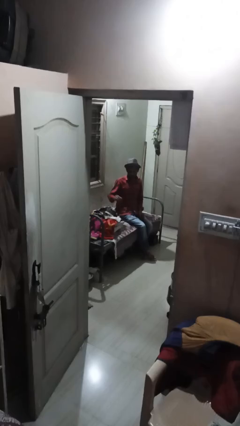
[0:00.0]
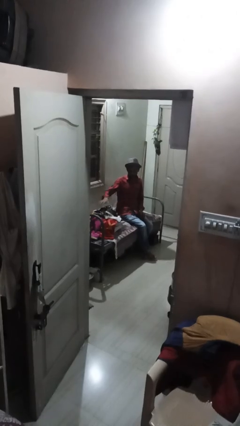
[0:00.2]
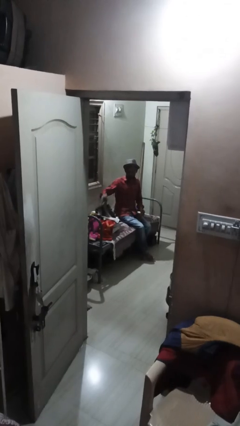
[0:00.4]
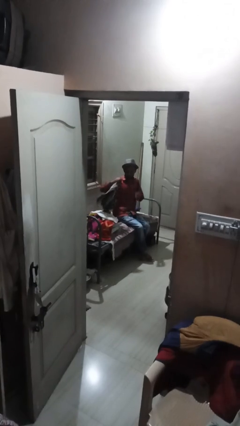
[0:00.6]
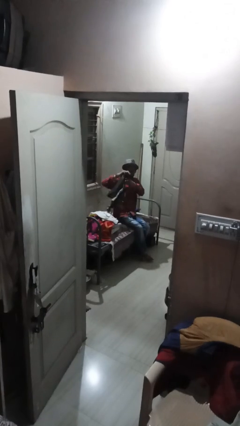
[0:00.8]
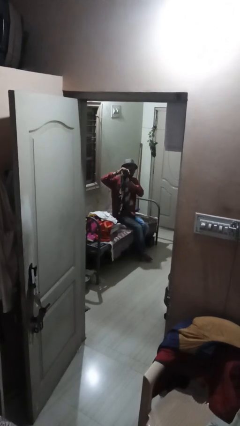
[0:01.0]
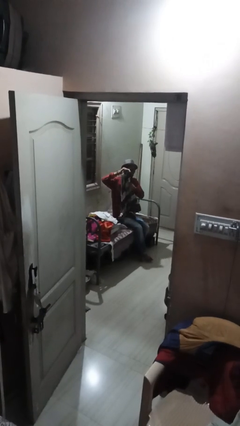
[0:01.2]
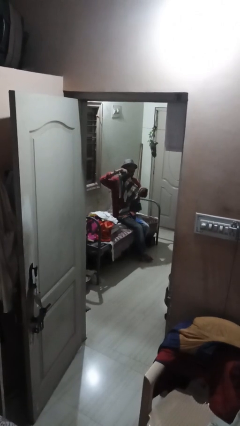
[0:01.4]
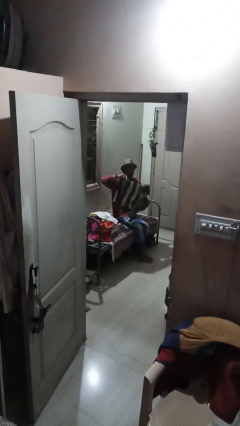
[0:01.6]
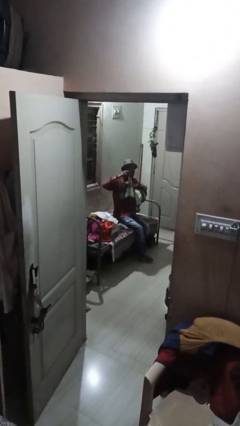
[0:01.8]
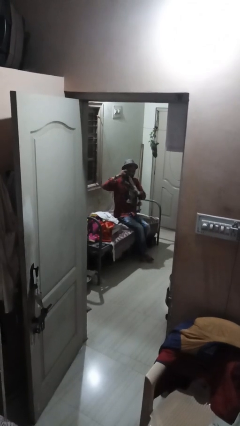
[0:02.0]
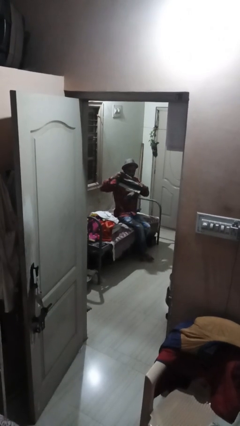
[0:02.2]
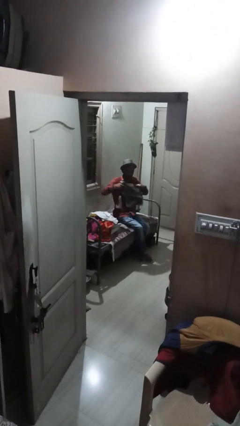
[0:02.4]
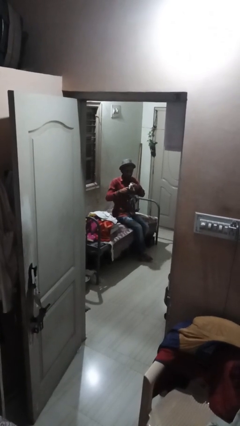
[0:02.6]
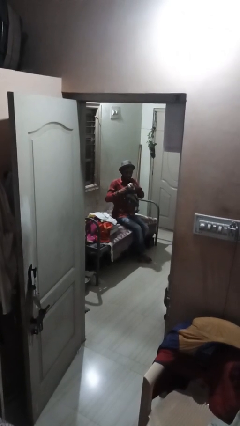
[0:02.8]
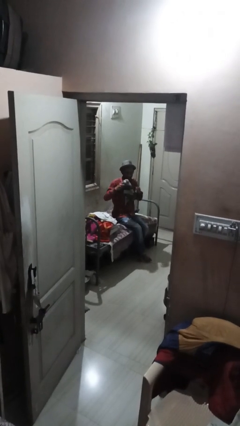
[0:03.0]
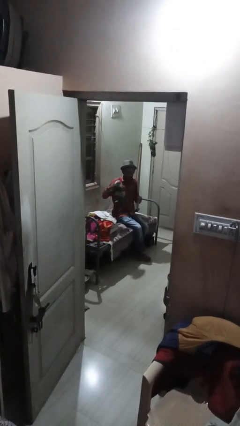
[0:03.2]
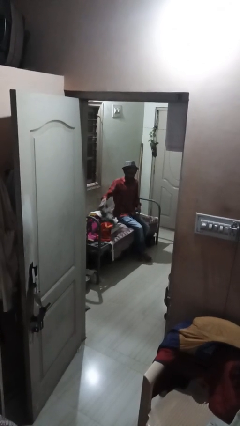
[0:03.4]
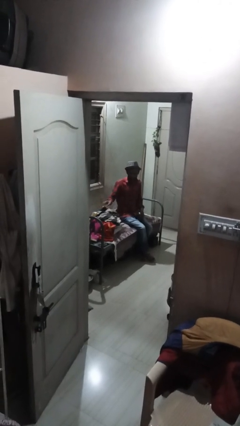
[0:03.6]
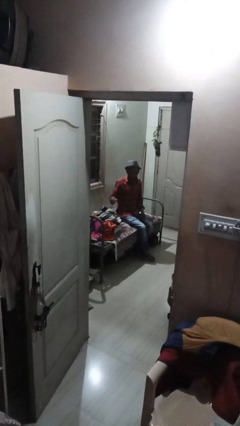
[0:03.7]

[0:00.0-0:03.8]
person folds shirt

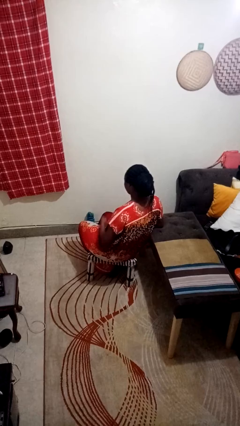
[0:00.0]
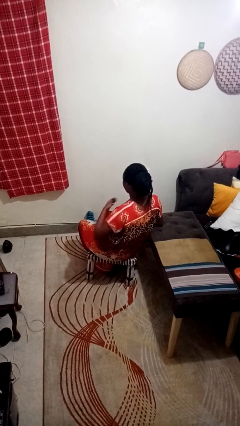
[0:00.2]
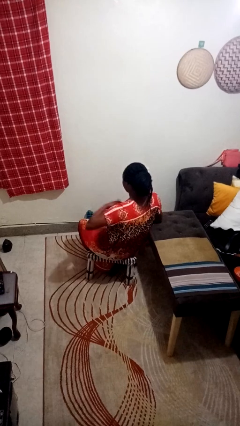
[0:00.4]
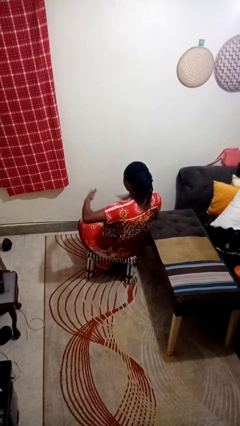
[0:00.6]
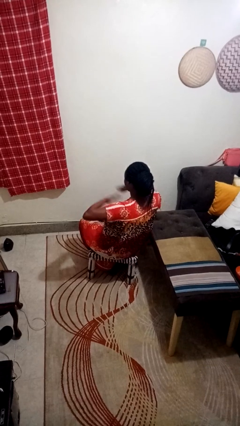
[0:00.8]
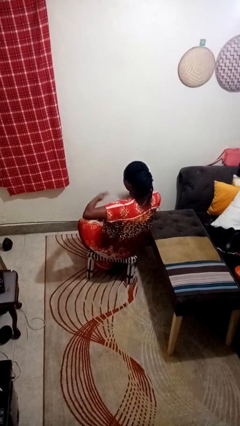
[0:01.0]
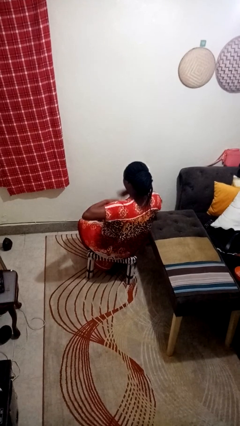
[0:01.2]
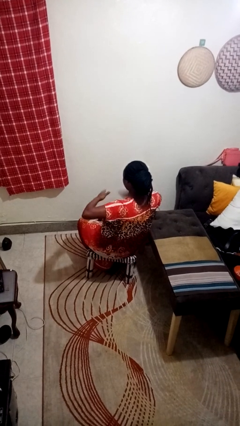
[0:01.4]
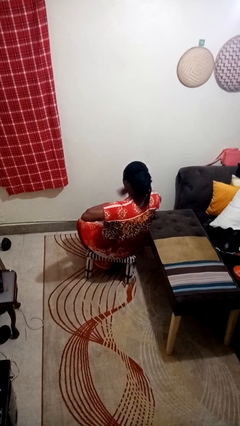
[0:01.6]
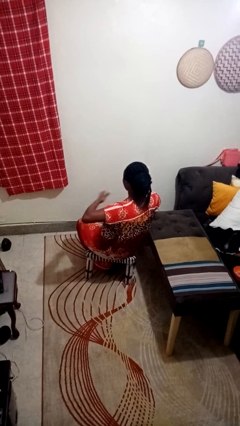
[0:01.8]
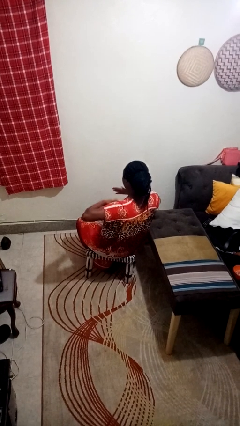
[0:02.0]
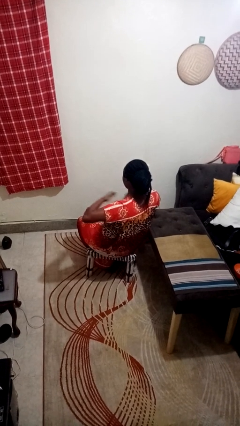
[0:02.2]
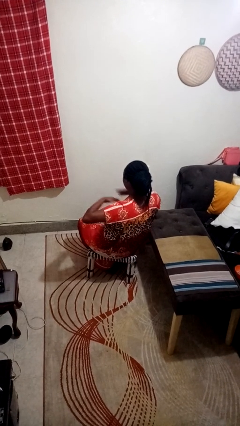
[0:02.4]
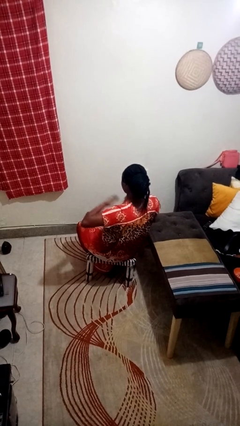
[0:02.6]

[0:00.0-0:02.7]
person drums on chest

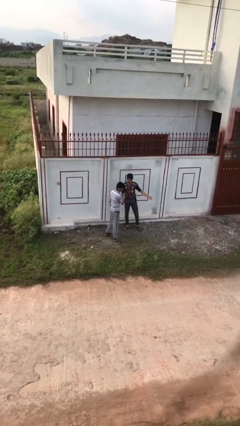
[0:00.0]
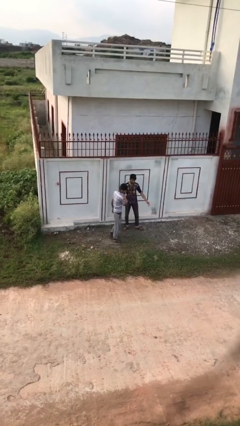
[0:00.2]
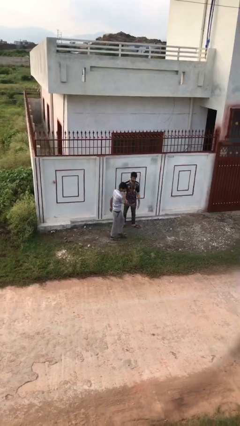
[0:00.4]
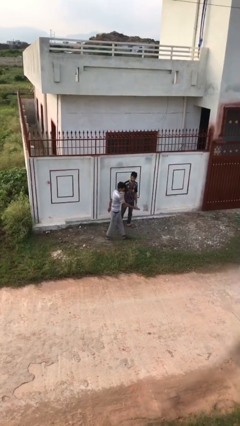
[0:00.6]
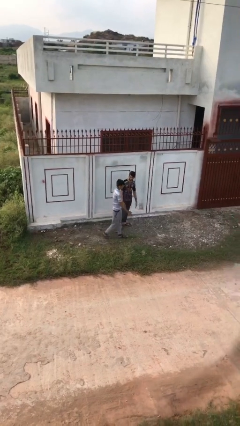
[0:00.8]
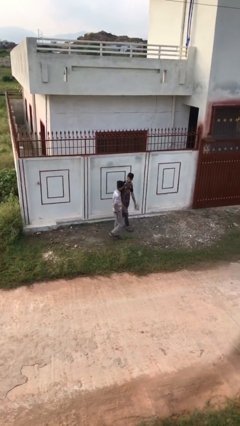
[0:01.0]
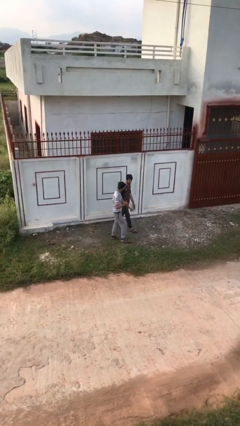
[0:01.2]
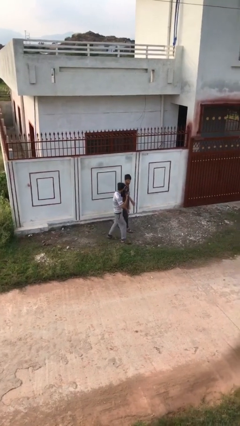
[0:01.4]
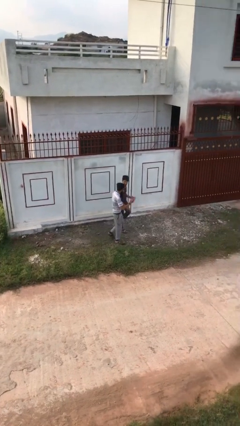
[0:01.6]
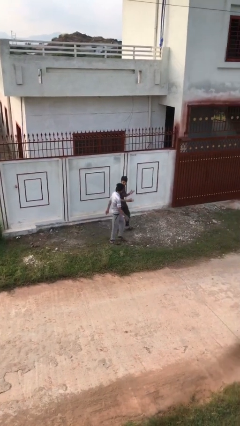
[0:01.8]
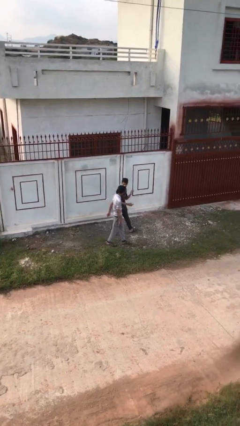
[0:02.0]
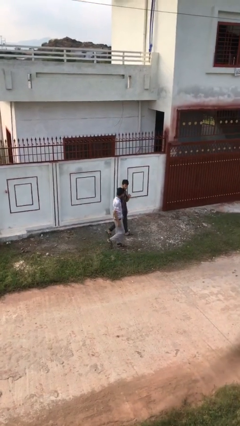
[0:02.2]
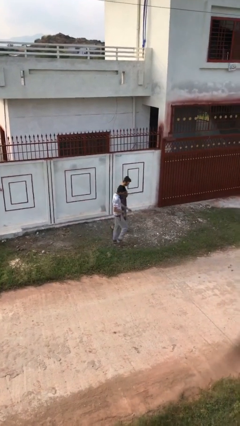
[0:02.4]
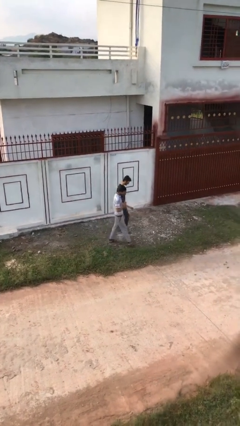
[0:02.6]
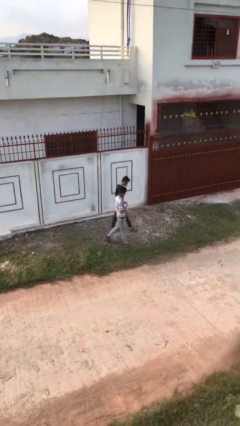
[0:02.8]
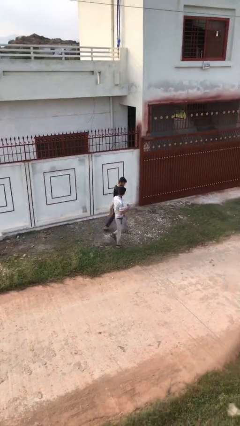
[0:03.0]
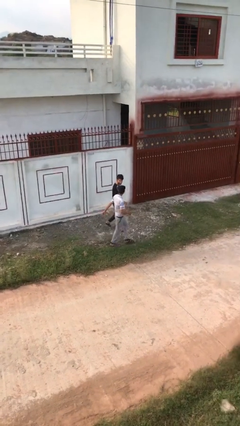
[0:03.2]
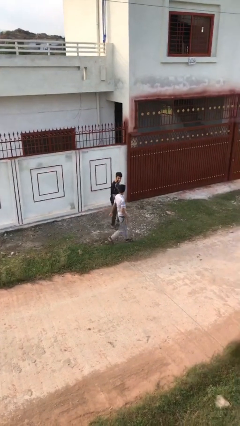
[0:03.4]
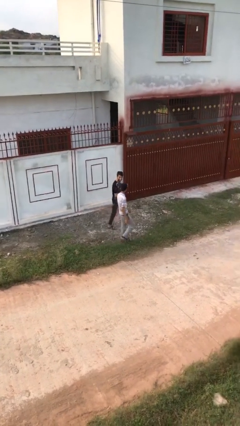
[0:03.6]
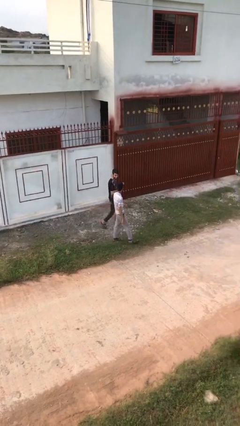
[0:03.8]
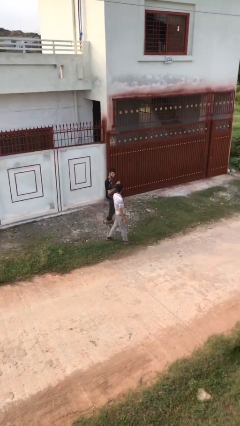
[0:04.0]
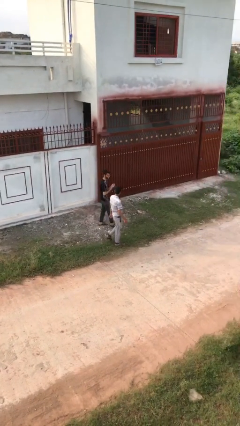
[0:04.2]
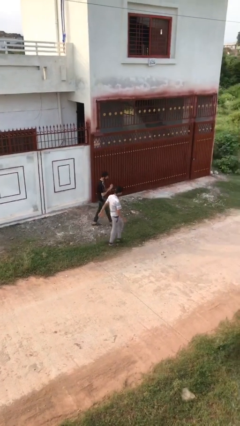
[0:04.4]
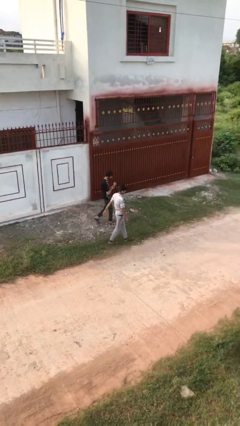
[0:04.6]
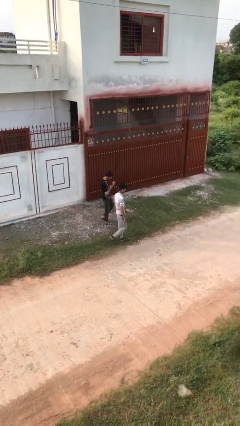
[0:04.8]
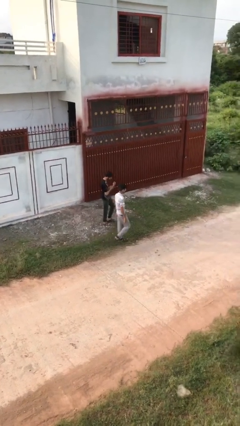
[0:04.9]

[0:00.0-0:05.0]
person talks to person

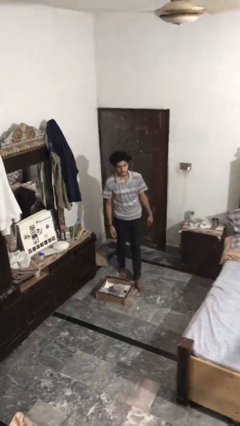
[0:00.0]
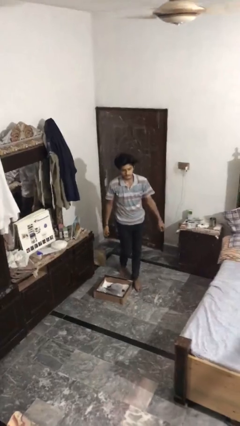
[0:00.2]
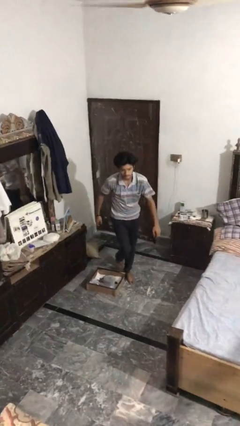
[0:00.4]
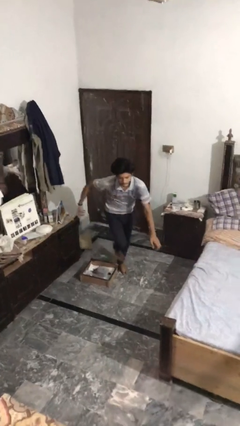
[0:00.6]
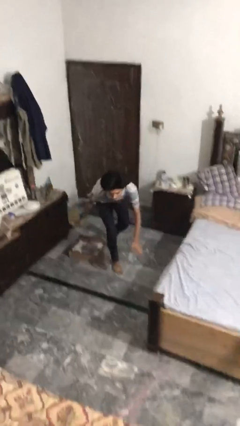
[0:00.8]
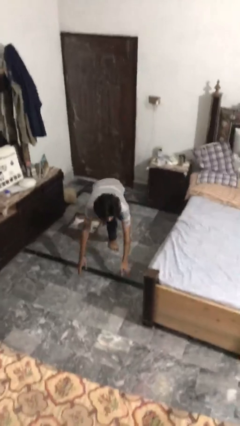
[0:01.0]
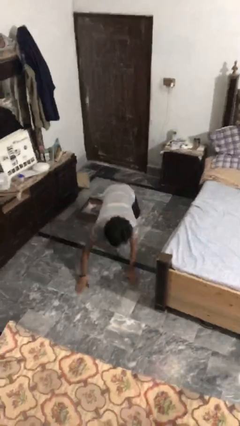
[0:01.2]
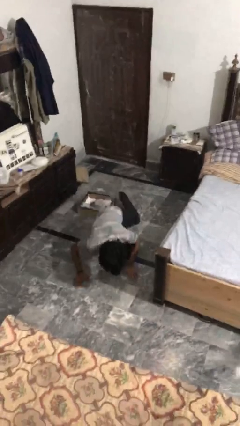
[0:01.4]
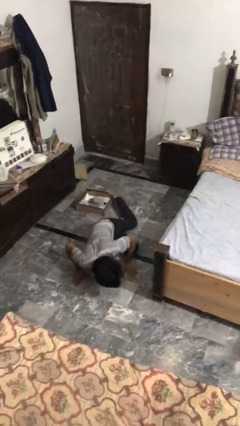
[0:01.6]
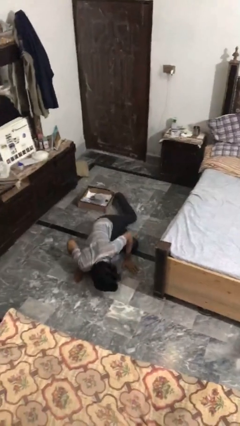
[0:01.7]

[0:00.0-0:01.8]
person trips on object on floor

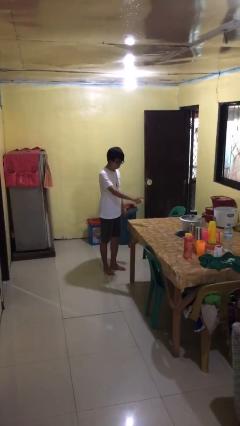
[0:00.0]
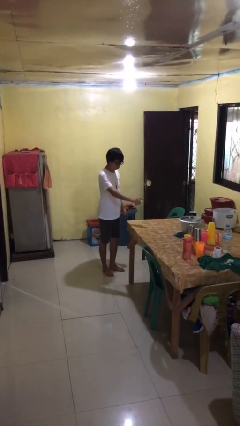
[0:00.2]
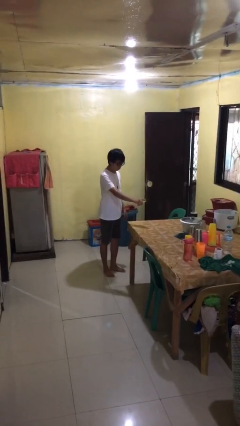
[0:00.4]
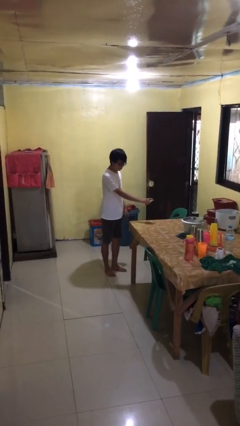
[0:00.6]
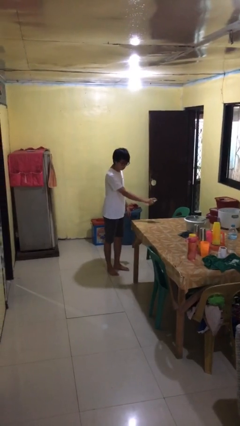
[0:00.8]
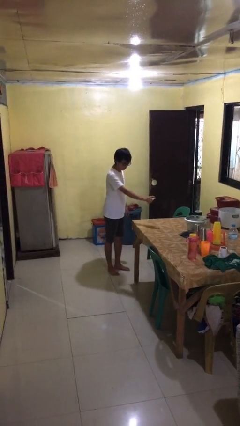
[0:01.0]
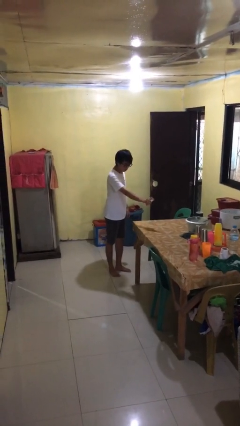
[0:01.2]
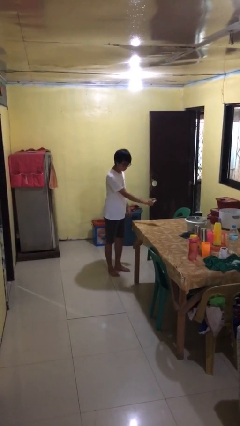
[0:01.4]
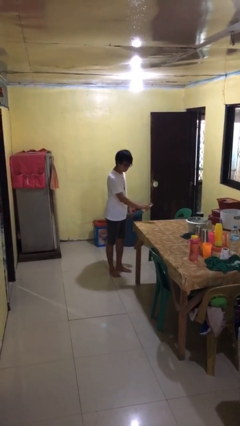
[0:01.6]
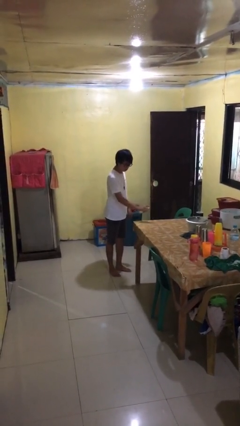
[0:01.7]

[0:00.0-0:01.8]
person sprays from bottle

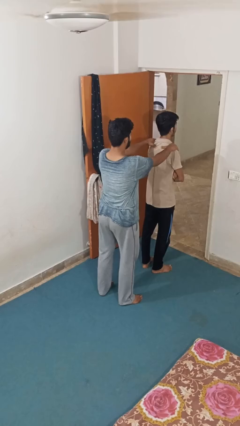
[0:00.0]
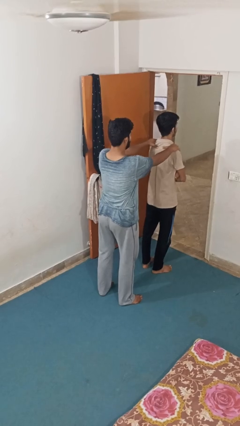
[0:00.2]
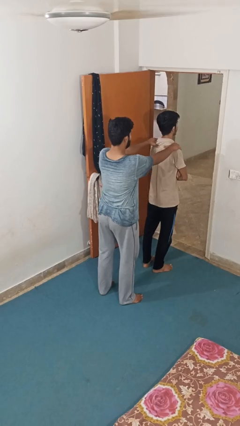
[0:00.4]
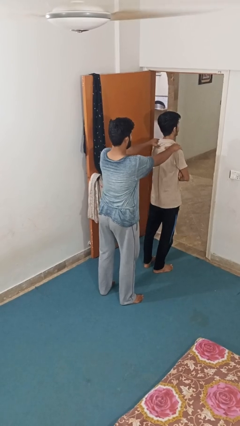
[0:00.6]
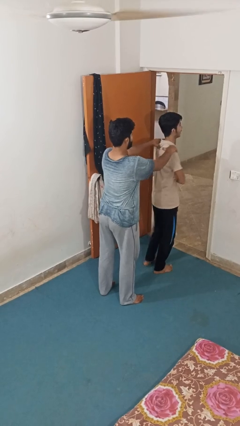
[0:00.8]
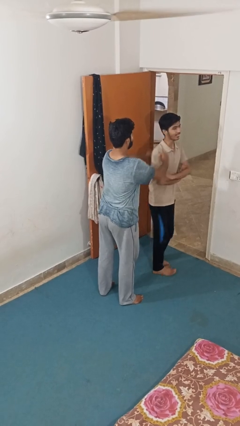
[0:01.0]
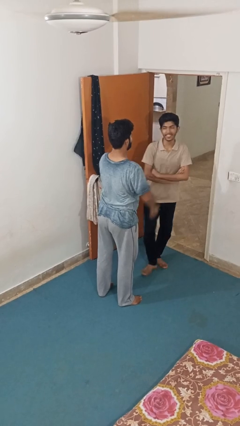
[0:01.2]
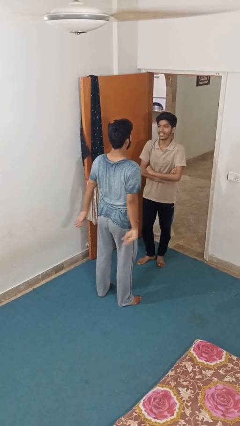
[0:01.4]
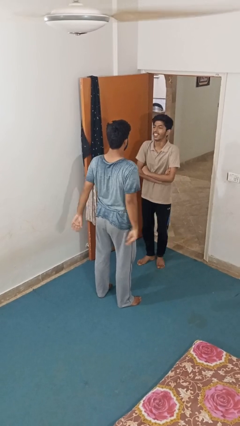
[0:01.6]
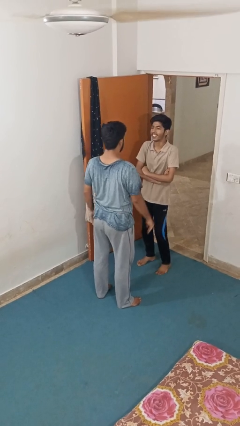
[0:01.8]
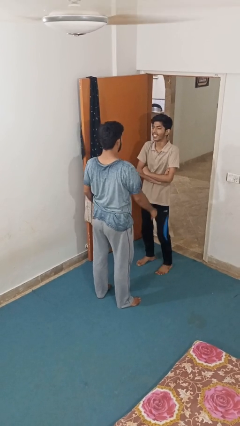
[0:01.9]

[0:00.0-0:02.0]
person spins person around

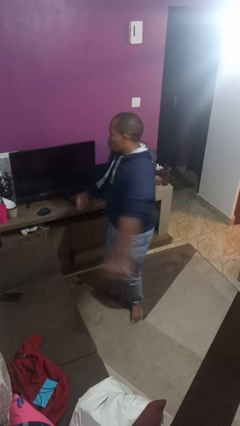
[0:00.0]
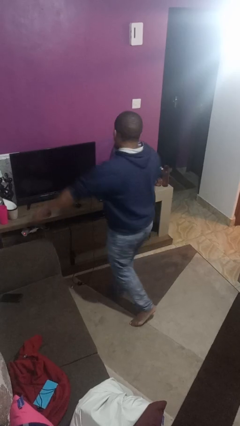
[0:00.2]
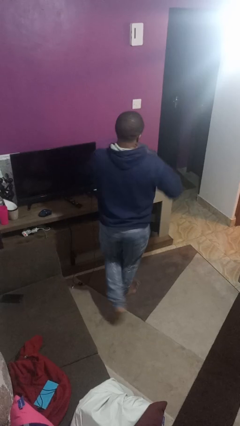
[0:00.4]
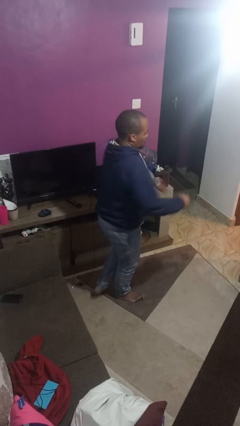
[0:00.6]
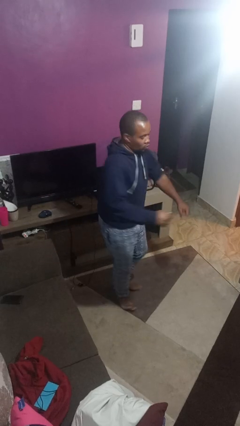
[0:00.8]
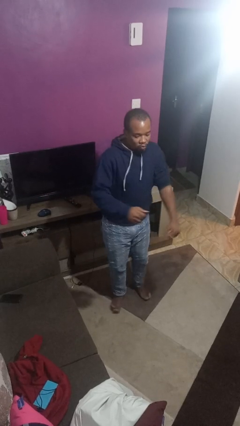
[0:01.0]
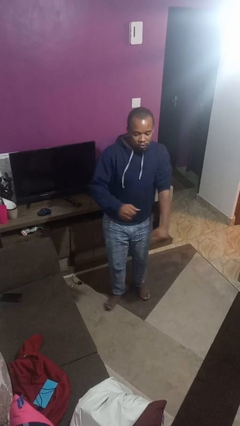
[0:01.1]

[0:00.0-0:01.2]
person twirls
